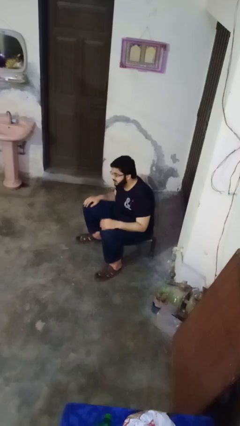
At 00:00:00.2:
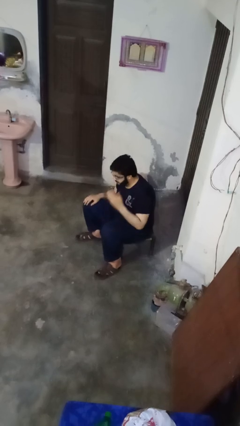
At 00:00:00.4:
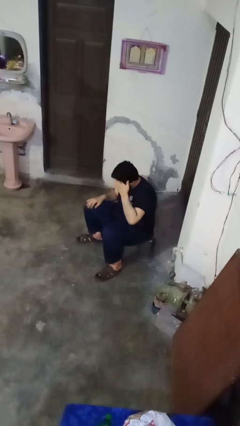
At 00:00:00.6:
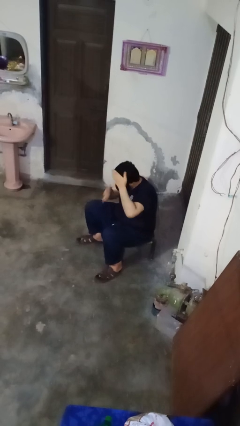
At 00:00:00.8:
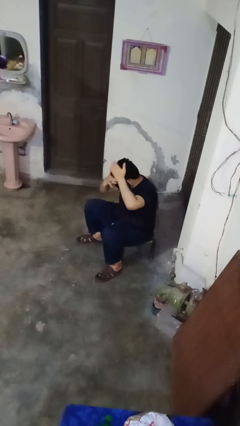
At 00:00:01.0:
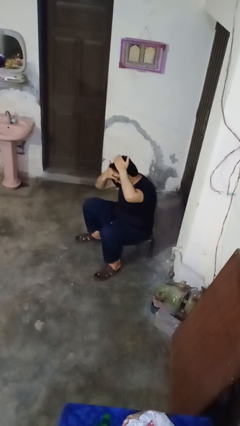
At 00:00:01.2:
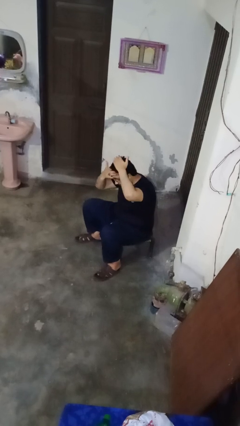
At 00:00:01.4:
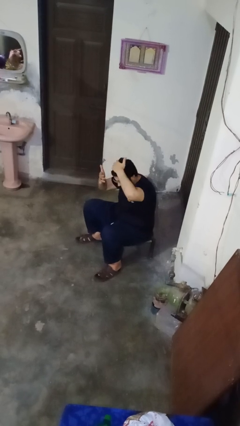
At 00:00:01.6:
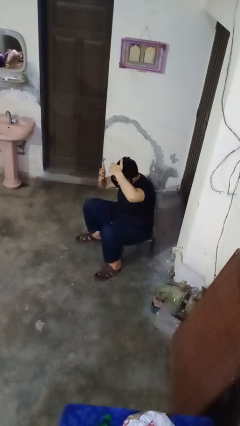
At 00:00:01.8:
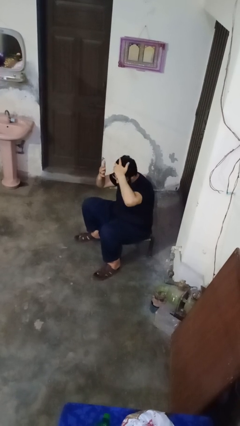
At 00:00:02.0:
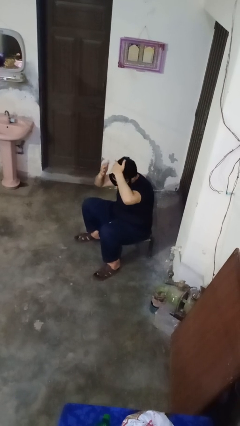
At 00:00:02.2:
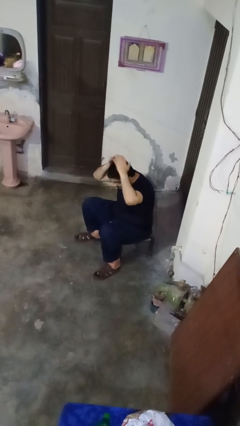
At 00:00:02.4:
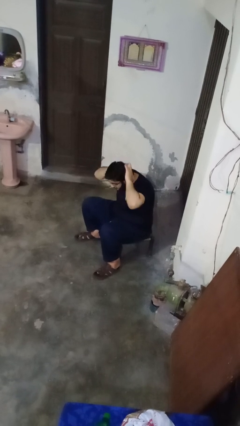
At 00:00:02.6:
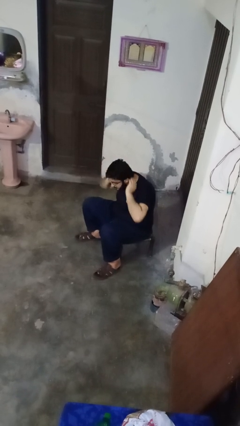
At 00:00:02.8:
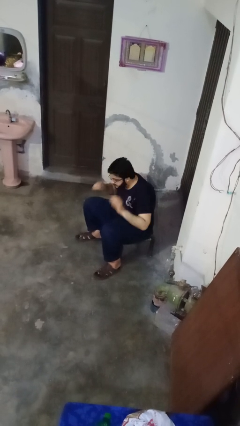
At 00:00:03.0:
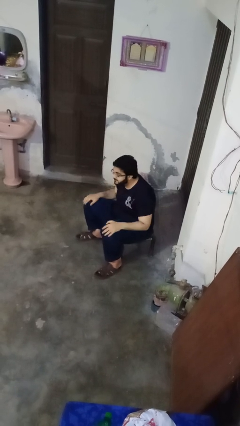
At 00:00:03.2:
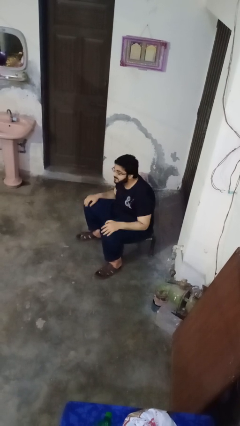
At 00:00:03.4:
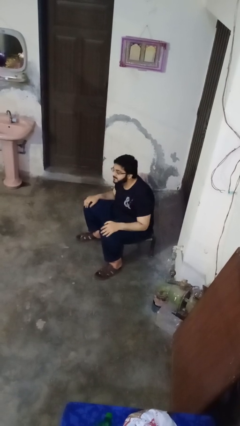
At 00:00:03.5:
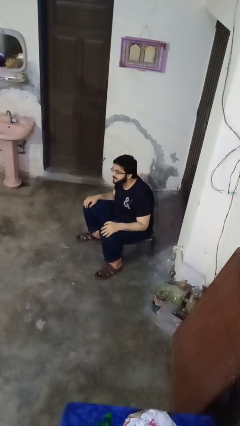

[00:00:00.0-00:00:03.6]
person strokes hair

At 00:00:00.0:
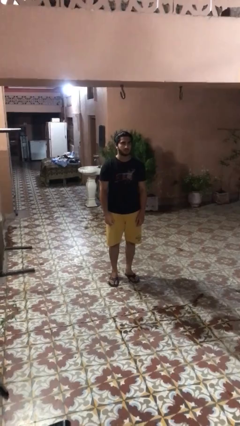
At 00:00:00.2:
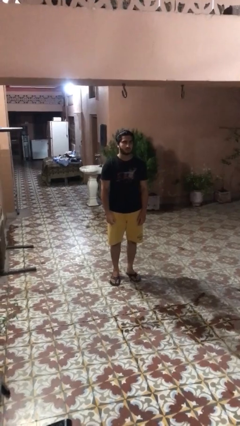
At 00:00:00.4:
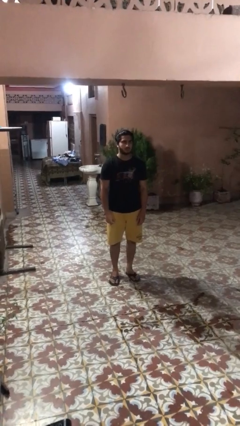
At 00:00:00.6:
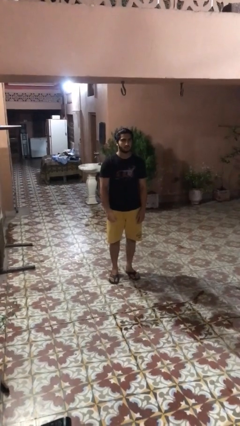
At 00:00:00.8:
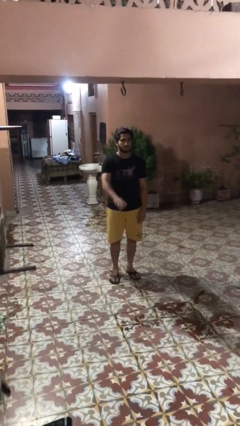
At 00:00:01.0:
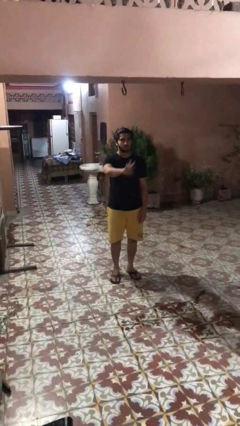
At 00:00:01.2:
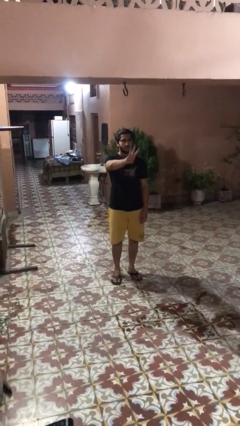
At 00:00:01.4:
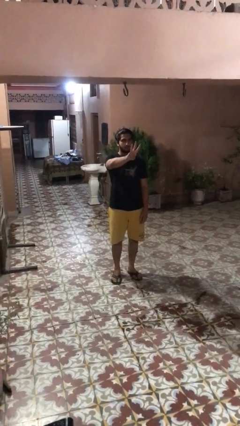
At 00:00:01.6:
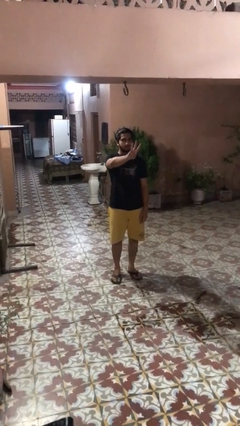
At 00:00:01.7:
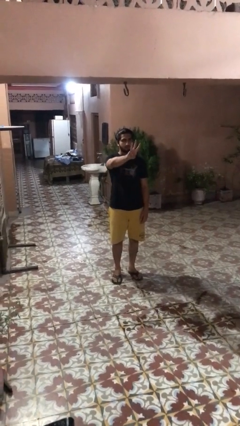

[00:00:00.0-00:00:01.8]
person gestures number three

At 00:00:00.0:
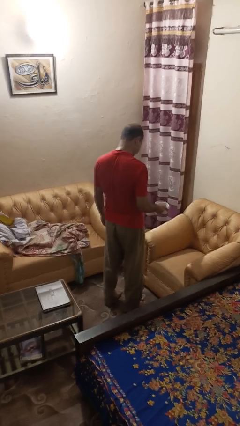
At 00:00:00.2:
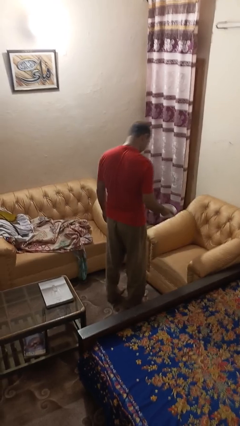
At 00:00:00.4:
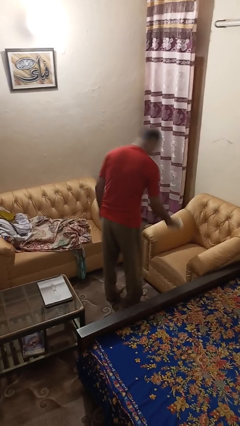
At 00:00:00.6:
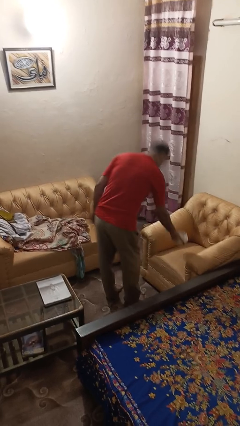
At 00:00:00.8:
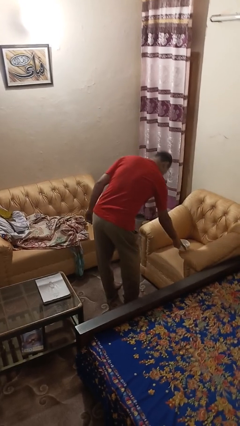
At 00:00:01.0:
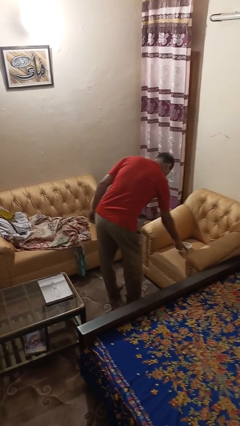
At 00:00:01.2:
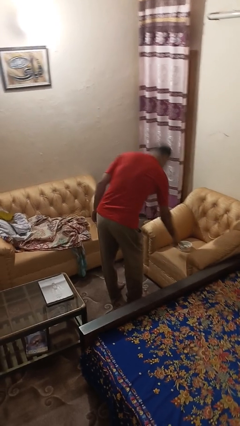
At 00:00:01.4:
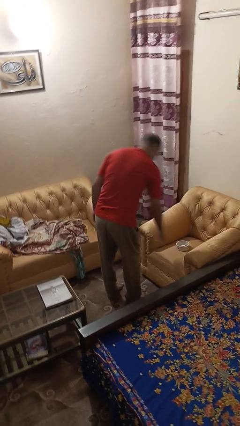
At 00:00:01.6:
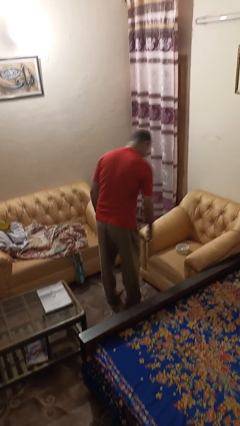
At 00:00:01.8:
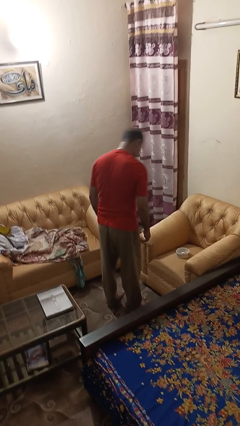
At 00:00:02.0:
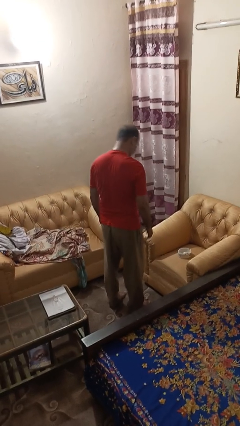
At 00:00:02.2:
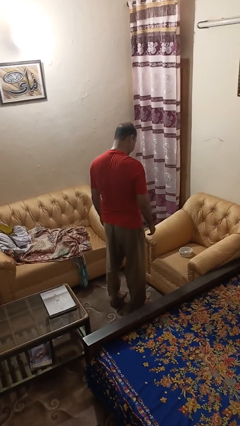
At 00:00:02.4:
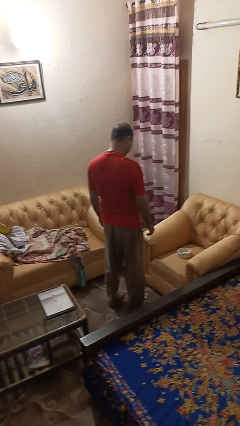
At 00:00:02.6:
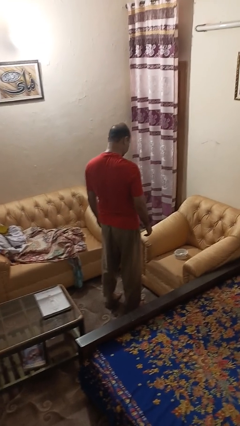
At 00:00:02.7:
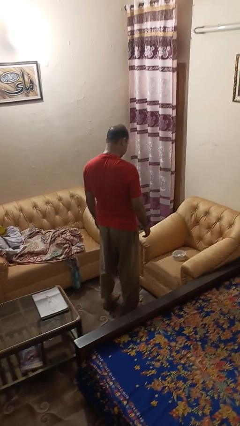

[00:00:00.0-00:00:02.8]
person puts down object on couch

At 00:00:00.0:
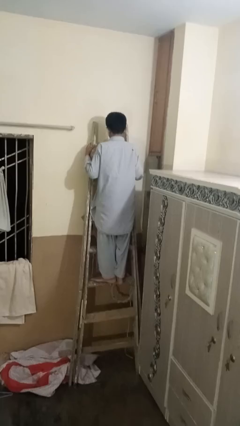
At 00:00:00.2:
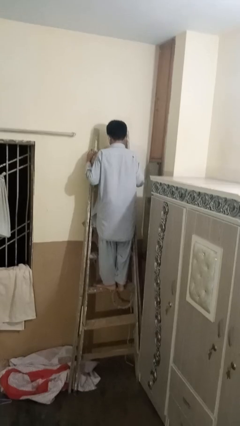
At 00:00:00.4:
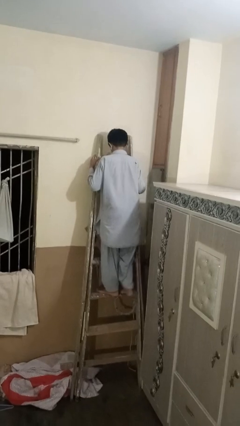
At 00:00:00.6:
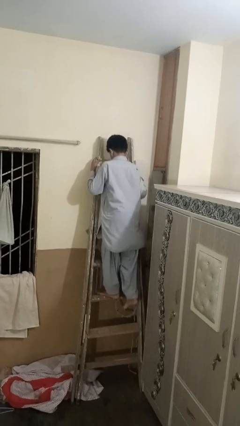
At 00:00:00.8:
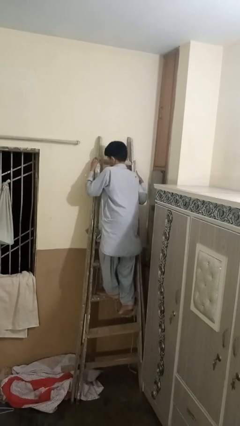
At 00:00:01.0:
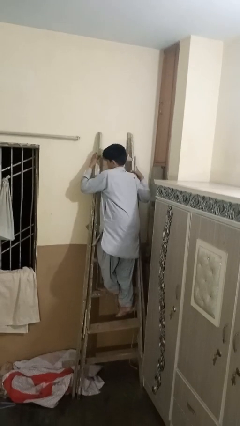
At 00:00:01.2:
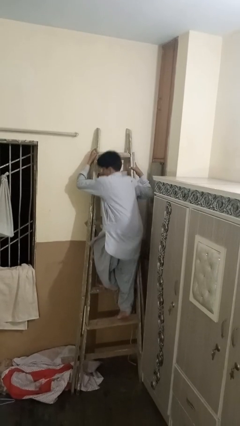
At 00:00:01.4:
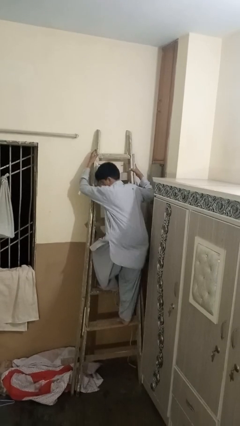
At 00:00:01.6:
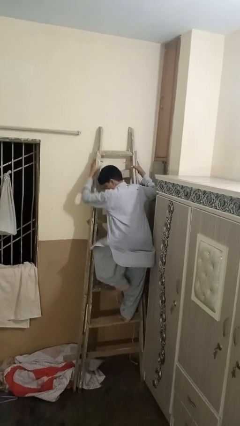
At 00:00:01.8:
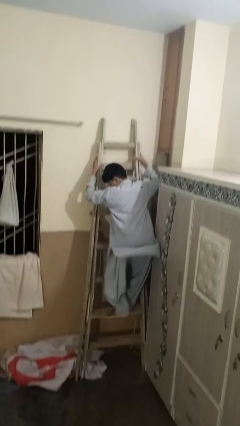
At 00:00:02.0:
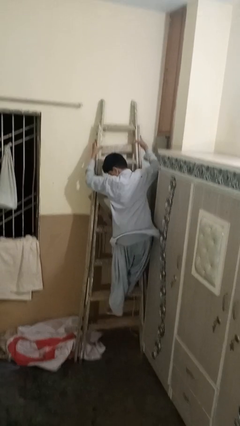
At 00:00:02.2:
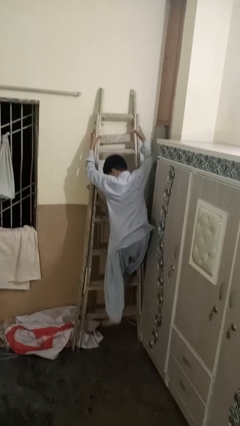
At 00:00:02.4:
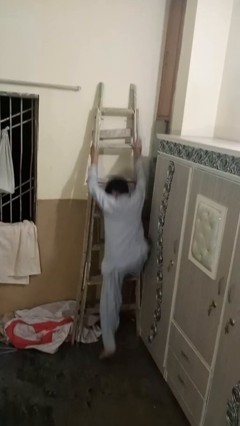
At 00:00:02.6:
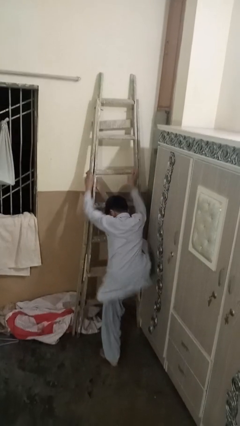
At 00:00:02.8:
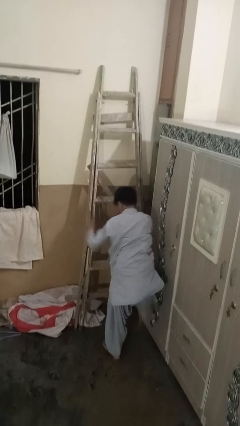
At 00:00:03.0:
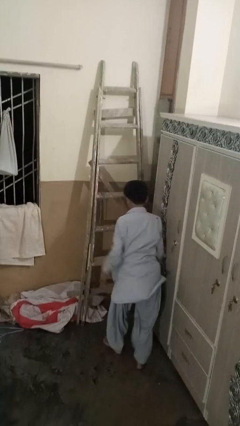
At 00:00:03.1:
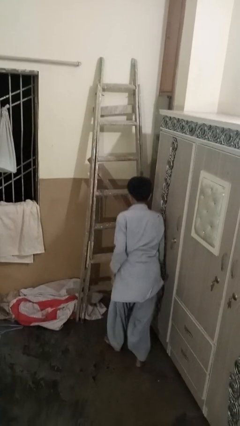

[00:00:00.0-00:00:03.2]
person climbs down ladder

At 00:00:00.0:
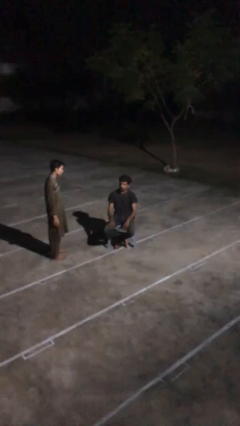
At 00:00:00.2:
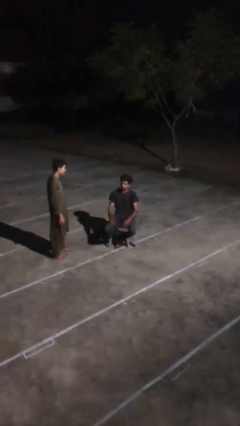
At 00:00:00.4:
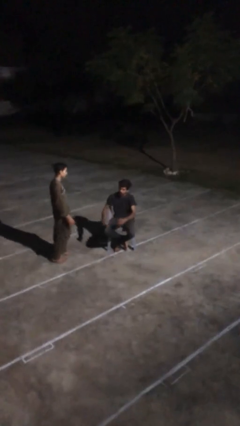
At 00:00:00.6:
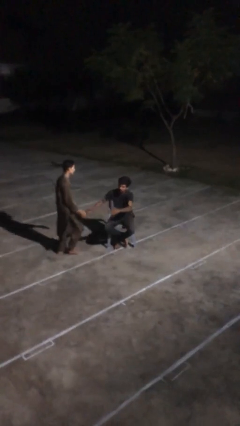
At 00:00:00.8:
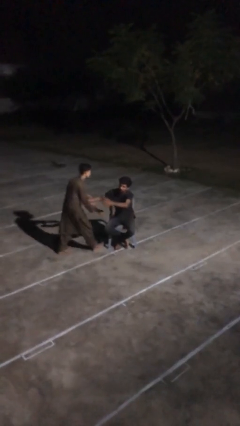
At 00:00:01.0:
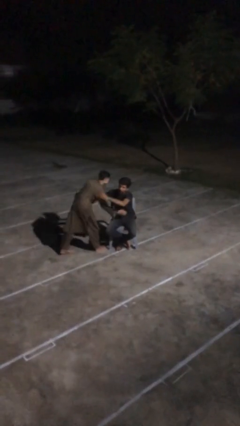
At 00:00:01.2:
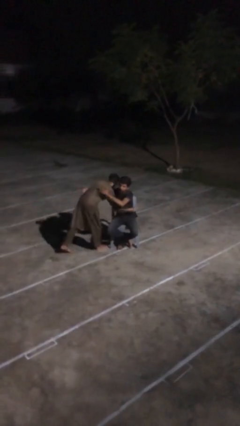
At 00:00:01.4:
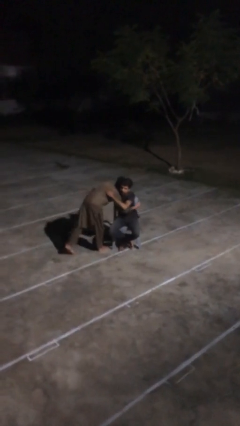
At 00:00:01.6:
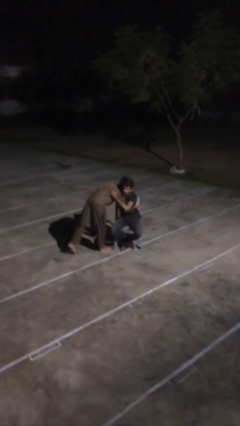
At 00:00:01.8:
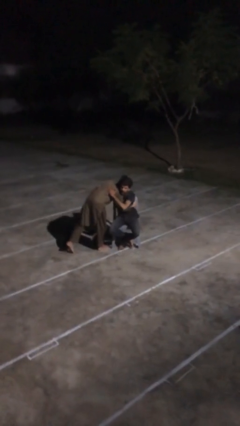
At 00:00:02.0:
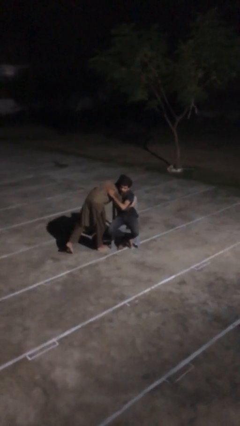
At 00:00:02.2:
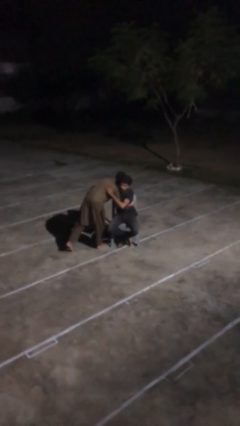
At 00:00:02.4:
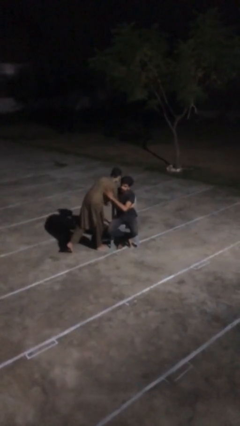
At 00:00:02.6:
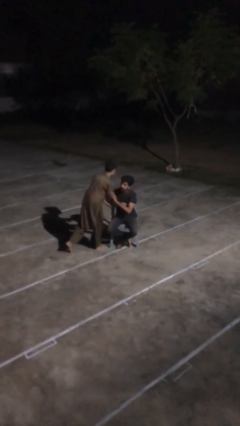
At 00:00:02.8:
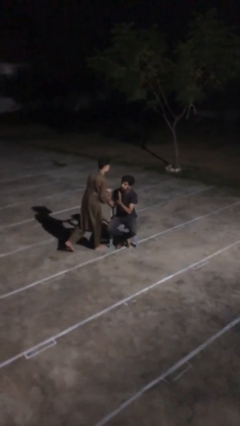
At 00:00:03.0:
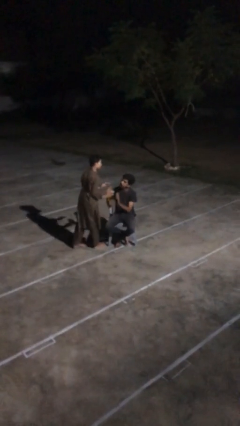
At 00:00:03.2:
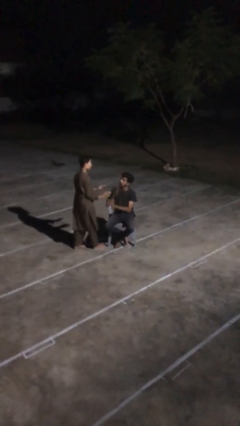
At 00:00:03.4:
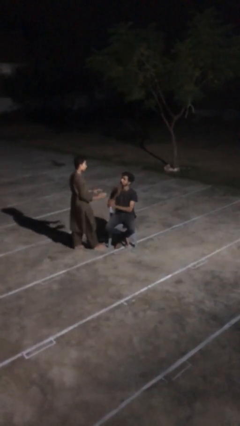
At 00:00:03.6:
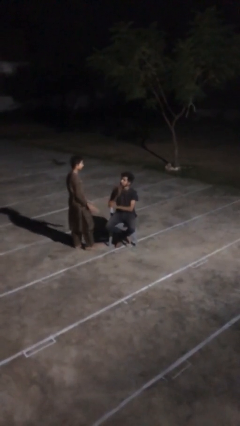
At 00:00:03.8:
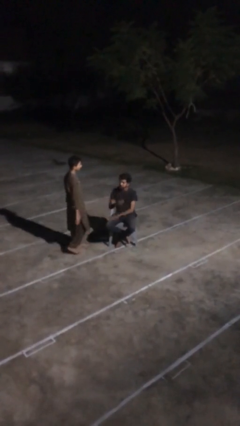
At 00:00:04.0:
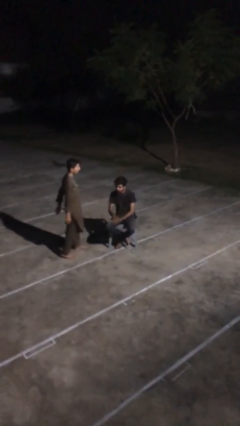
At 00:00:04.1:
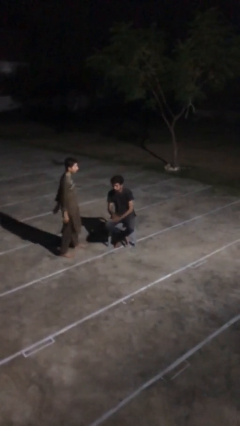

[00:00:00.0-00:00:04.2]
person embraces person

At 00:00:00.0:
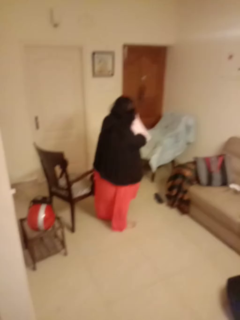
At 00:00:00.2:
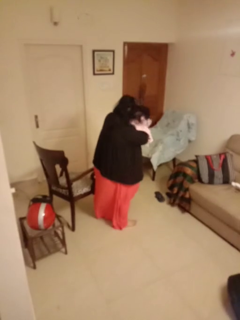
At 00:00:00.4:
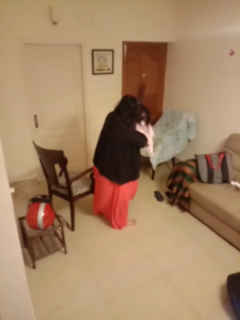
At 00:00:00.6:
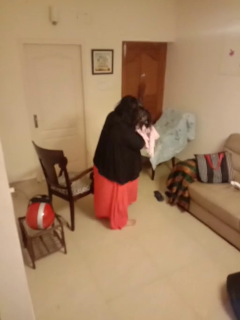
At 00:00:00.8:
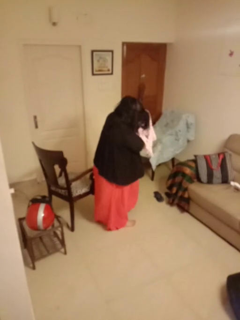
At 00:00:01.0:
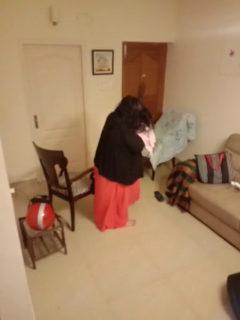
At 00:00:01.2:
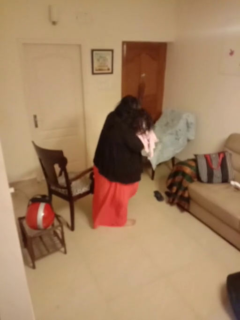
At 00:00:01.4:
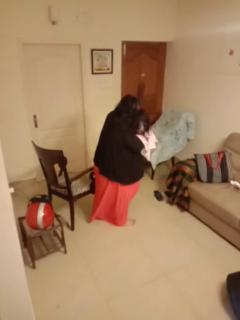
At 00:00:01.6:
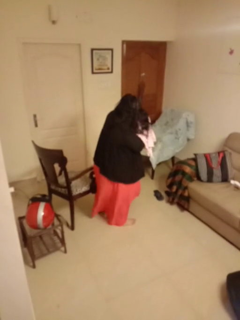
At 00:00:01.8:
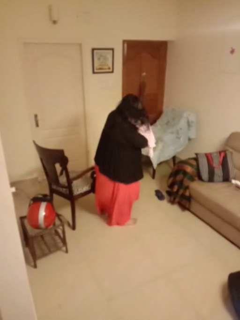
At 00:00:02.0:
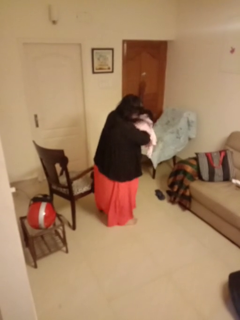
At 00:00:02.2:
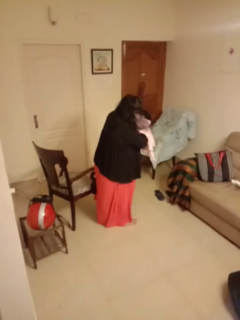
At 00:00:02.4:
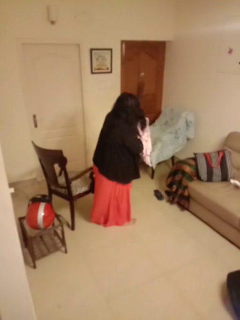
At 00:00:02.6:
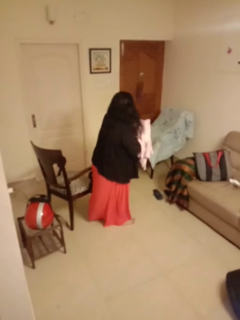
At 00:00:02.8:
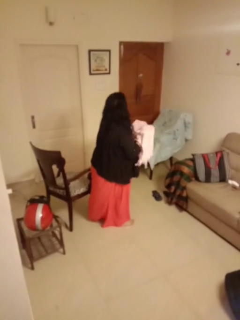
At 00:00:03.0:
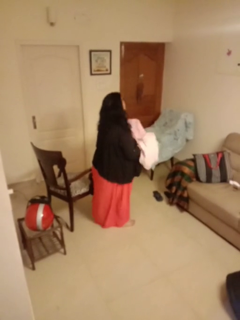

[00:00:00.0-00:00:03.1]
person dries hair with towel
